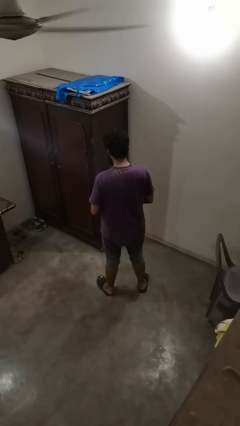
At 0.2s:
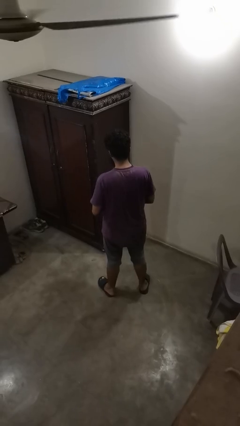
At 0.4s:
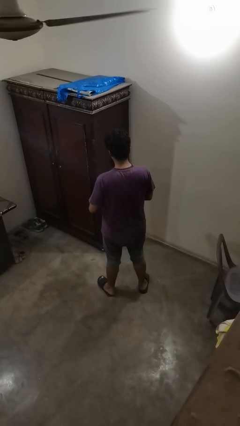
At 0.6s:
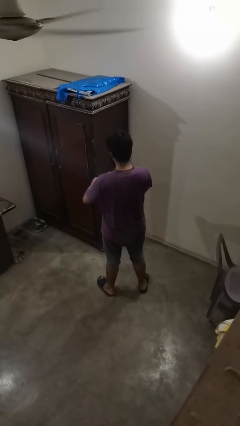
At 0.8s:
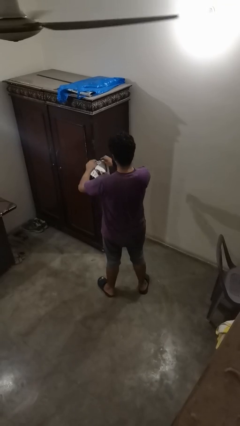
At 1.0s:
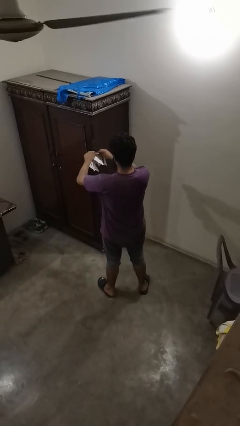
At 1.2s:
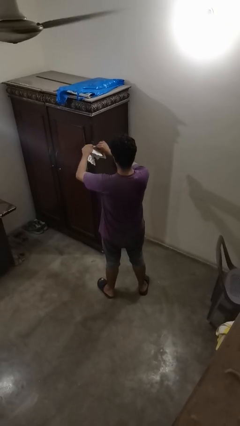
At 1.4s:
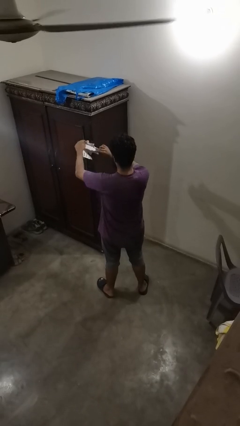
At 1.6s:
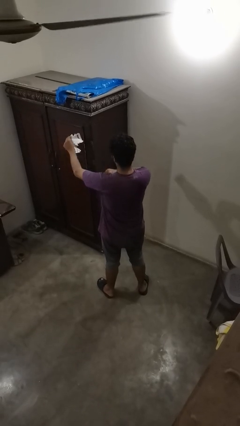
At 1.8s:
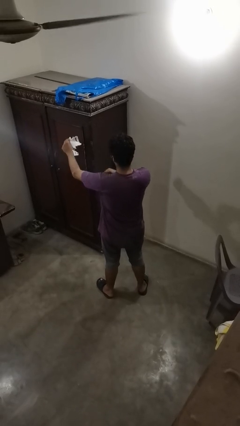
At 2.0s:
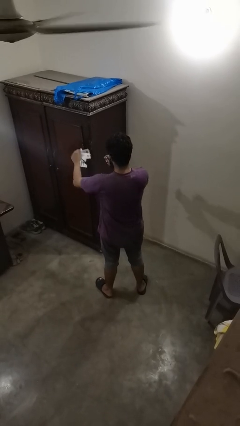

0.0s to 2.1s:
person tears paper

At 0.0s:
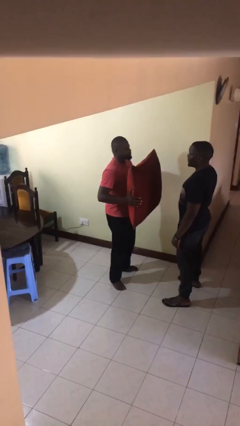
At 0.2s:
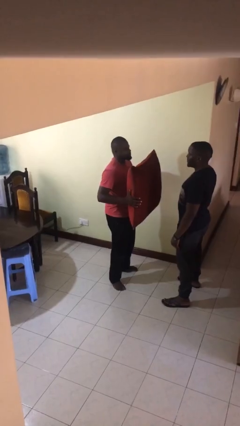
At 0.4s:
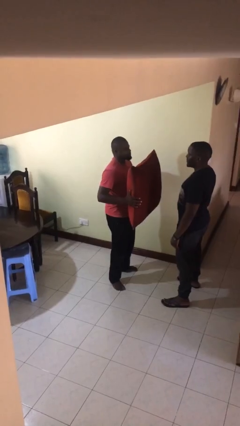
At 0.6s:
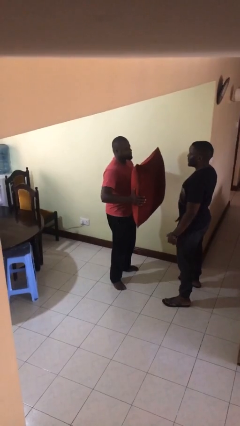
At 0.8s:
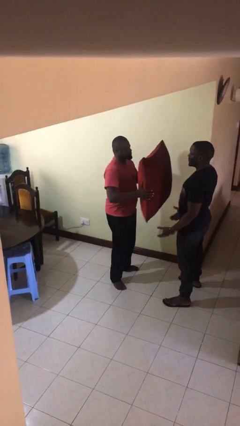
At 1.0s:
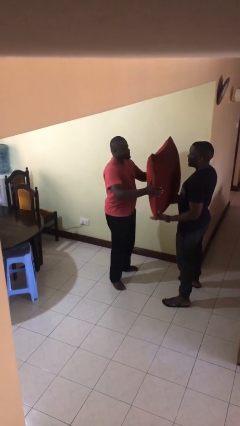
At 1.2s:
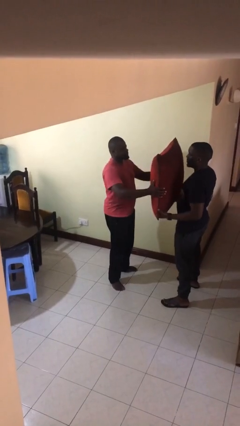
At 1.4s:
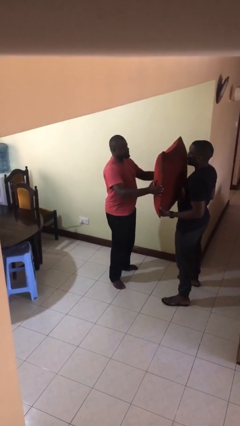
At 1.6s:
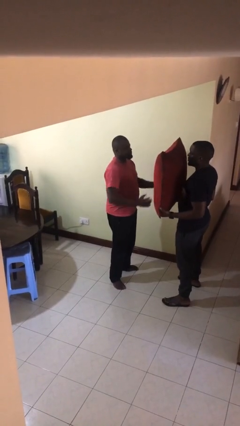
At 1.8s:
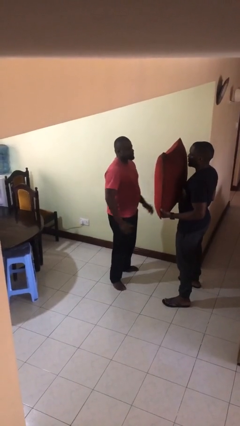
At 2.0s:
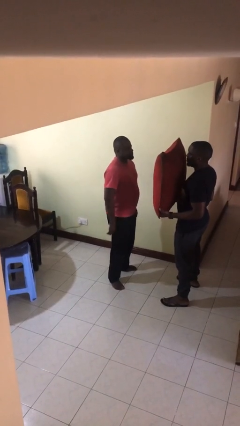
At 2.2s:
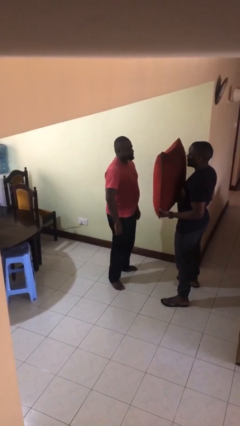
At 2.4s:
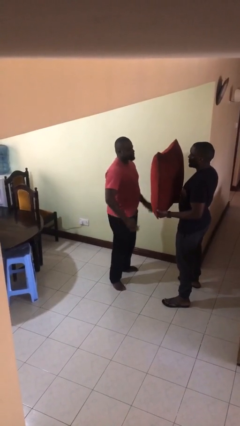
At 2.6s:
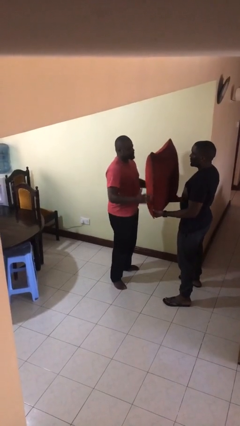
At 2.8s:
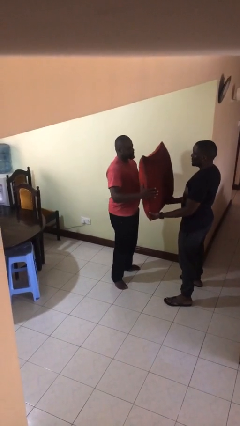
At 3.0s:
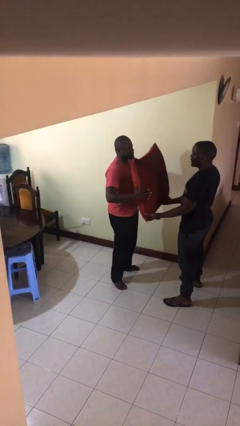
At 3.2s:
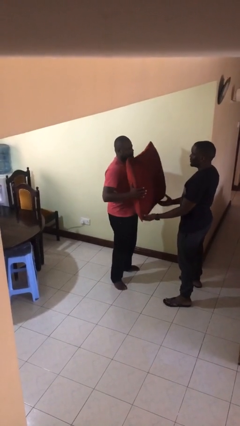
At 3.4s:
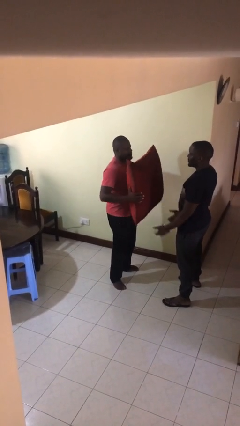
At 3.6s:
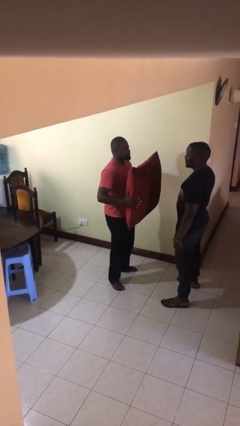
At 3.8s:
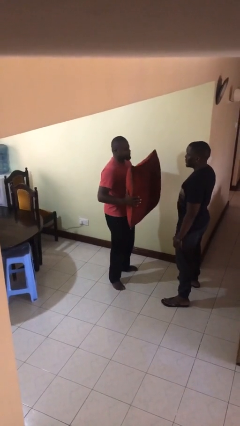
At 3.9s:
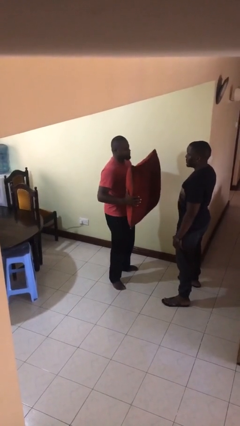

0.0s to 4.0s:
person transfers object to person

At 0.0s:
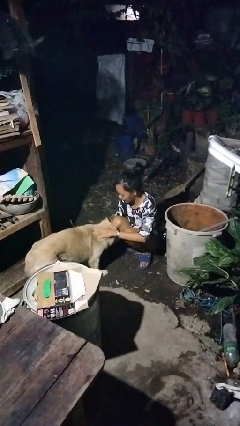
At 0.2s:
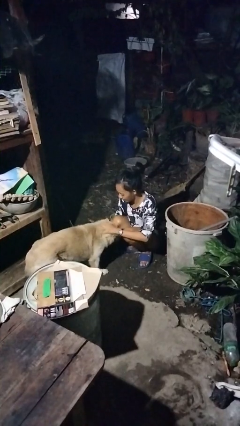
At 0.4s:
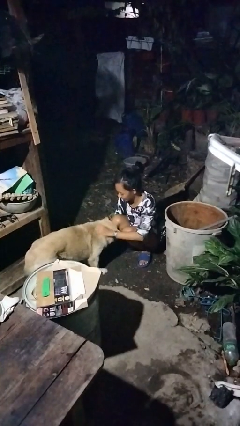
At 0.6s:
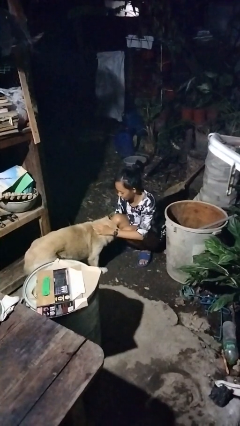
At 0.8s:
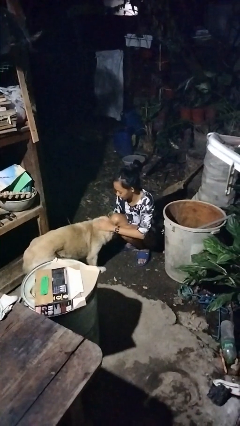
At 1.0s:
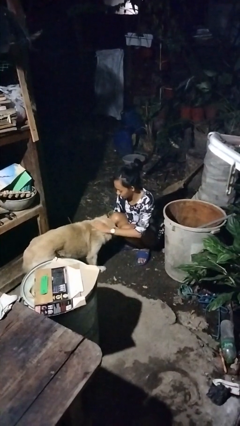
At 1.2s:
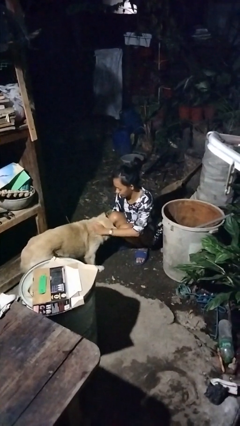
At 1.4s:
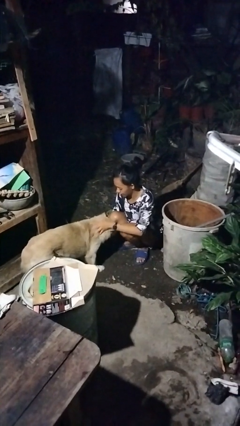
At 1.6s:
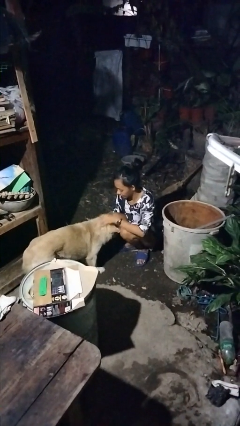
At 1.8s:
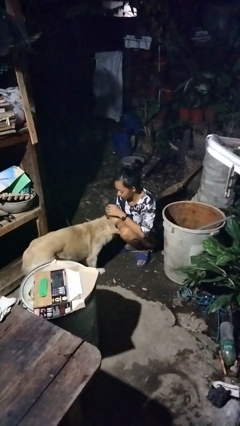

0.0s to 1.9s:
person pets dog

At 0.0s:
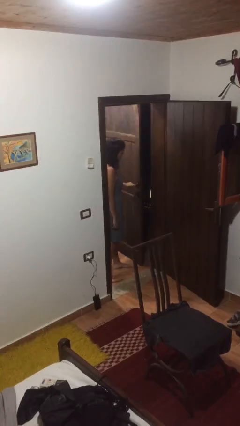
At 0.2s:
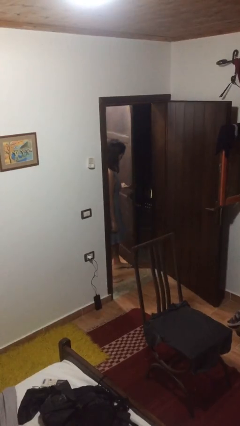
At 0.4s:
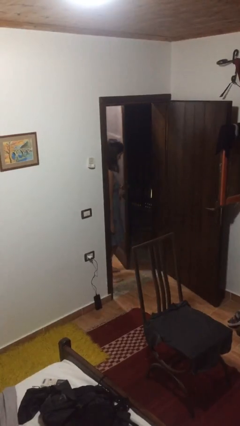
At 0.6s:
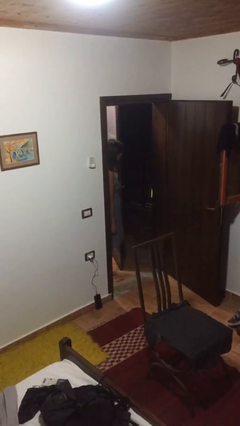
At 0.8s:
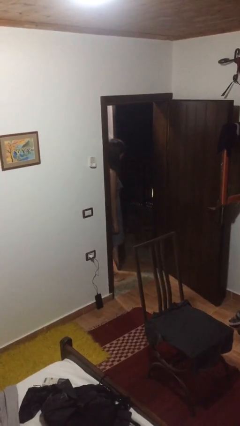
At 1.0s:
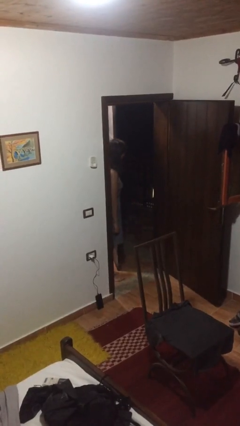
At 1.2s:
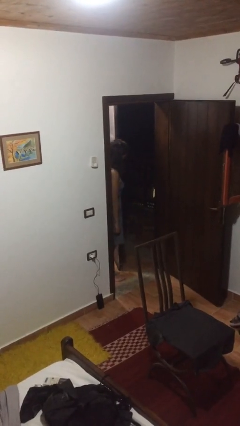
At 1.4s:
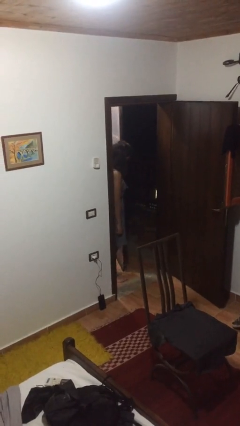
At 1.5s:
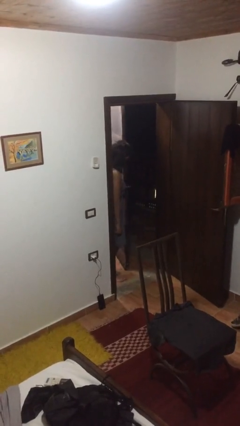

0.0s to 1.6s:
person opens facility door

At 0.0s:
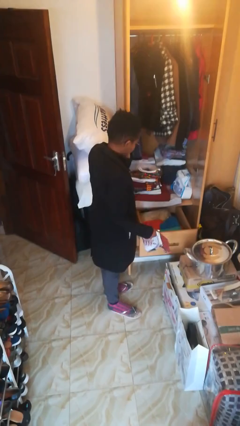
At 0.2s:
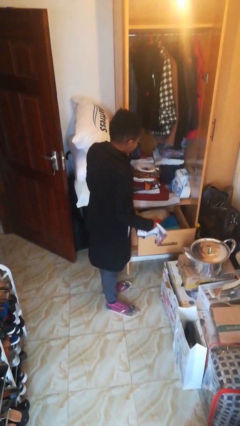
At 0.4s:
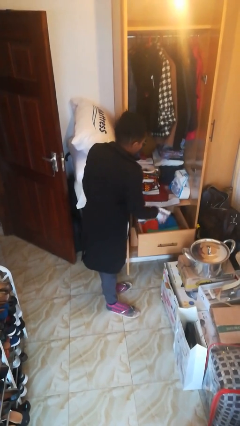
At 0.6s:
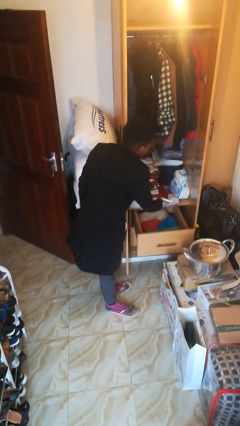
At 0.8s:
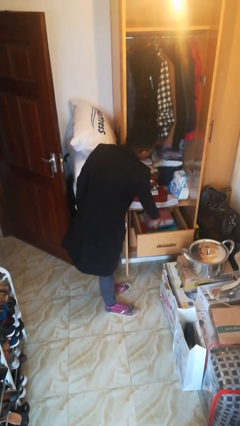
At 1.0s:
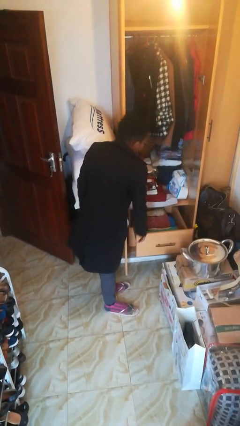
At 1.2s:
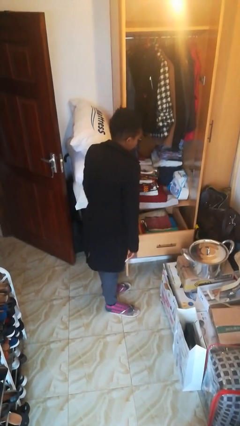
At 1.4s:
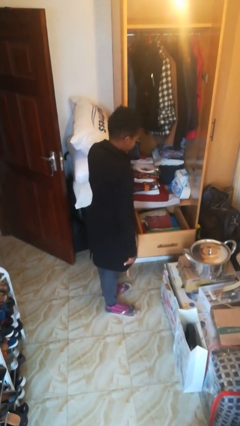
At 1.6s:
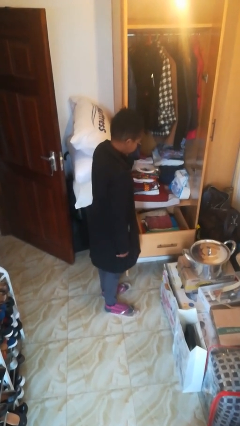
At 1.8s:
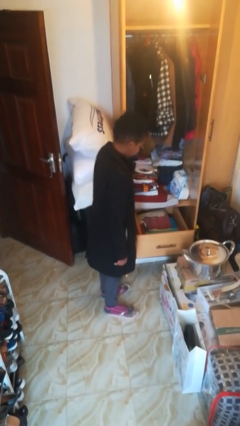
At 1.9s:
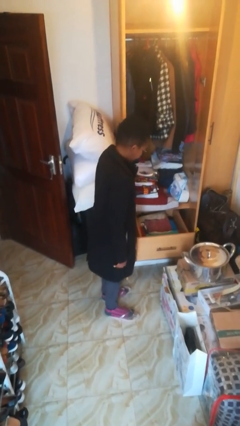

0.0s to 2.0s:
person puts clothes into dresser

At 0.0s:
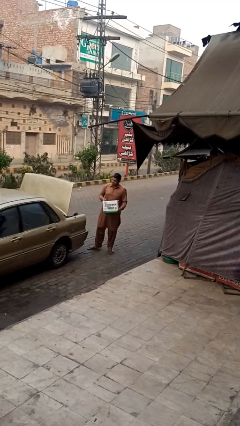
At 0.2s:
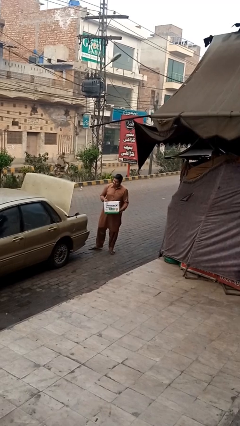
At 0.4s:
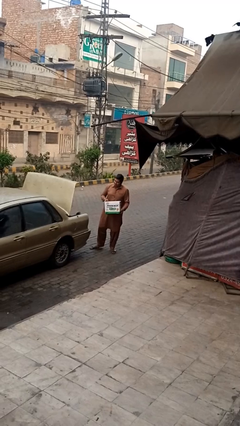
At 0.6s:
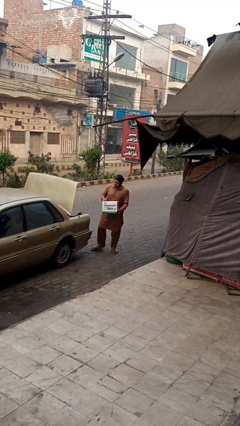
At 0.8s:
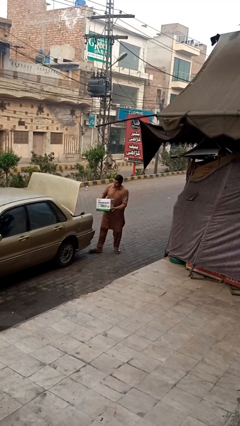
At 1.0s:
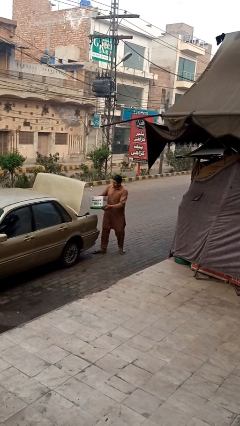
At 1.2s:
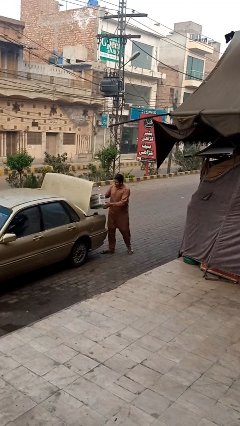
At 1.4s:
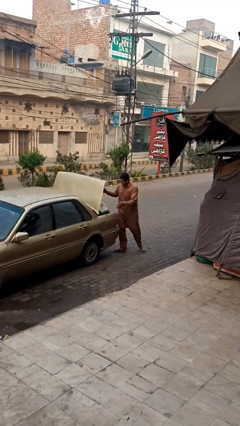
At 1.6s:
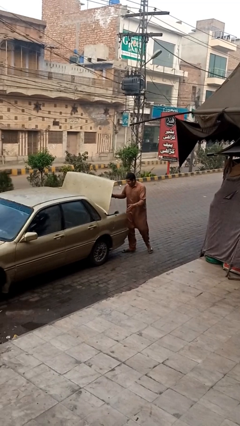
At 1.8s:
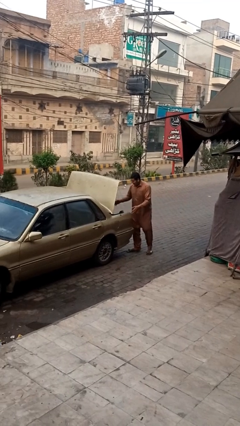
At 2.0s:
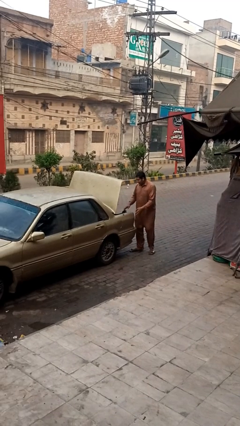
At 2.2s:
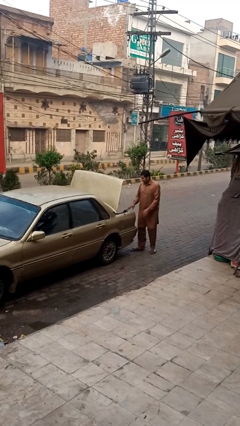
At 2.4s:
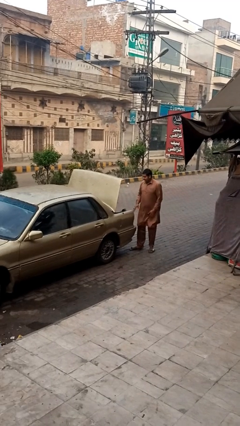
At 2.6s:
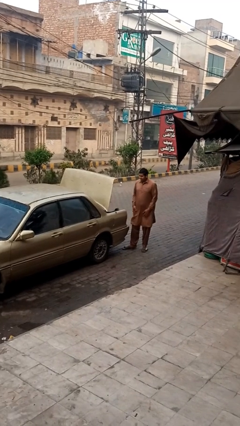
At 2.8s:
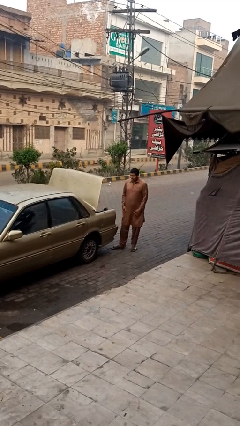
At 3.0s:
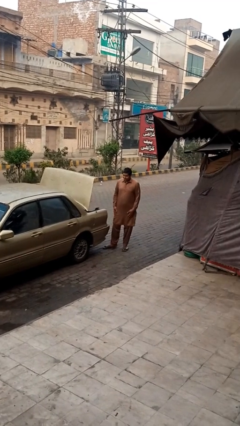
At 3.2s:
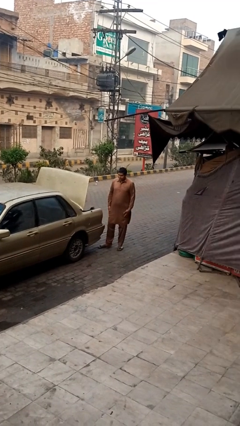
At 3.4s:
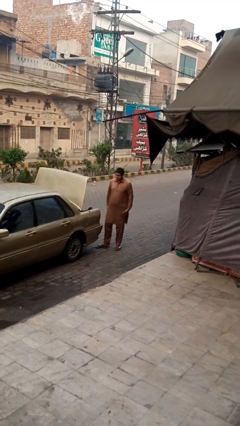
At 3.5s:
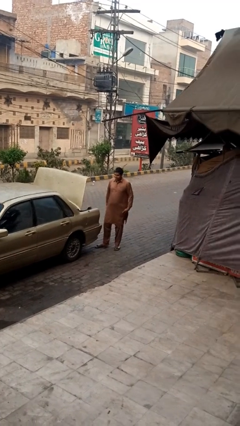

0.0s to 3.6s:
person loads car

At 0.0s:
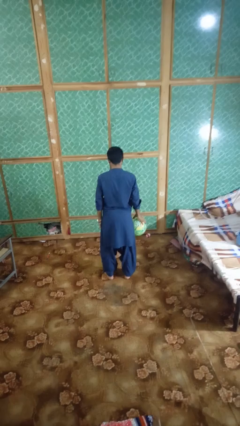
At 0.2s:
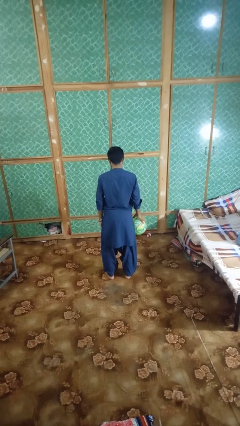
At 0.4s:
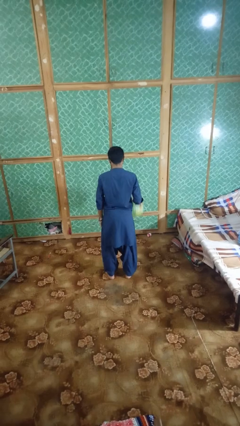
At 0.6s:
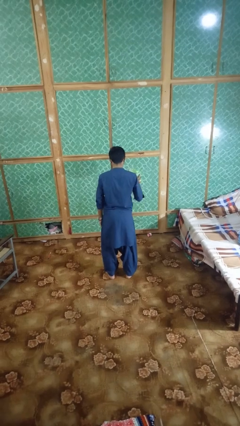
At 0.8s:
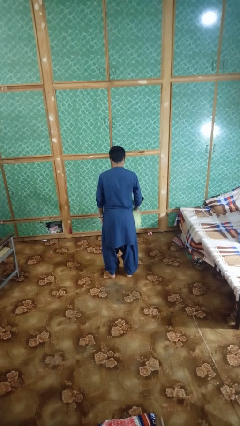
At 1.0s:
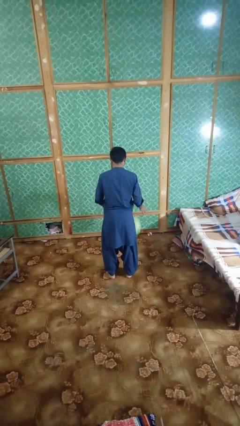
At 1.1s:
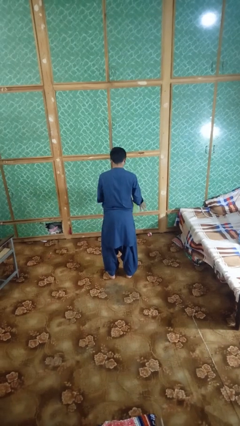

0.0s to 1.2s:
person bounces ball on floor

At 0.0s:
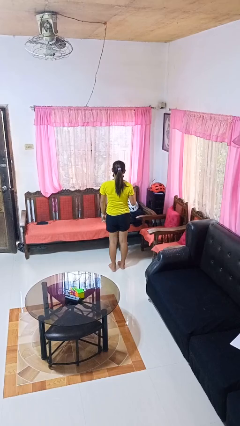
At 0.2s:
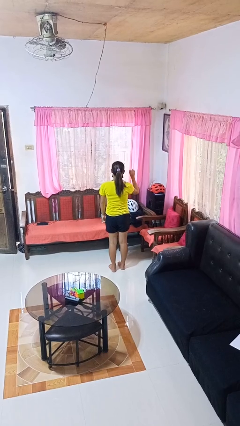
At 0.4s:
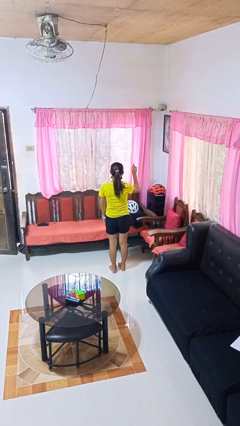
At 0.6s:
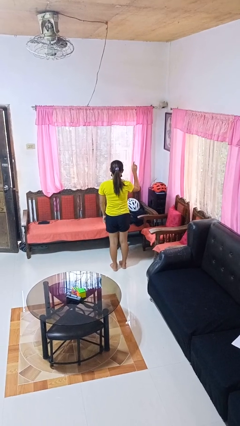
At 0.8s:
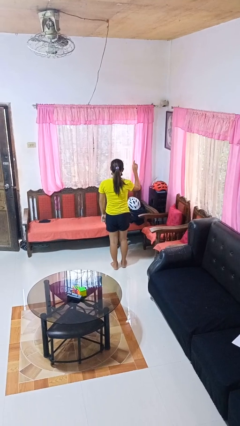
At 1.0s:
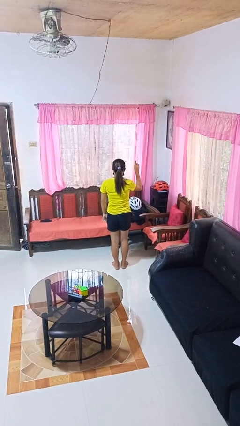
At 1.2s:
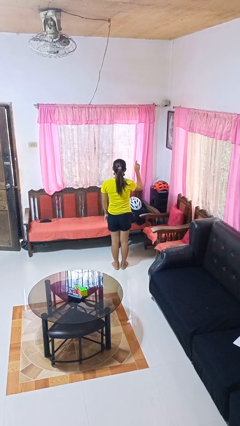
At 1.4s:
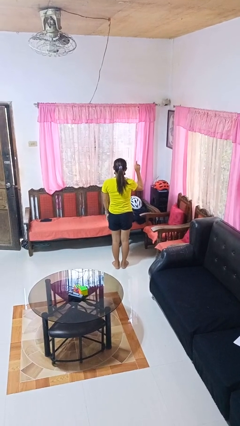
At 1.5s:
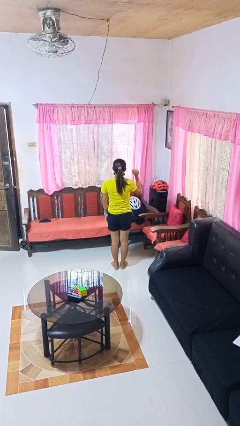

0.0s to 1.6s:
person gestures number one
